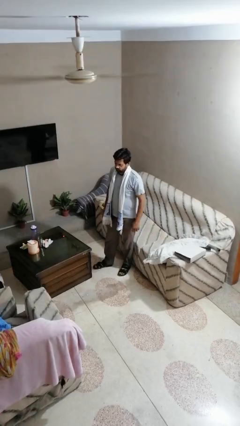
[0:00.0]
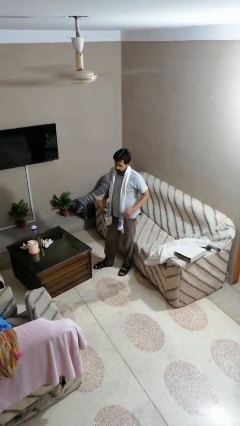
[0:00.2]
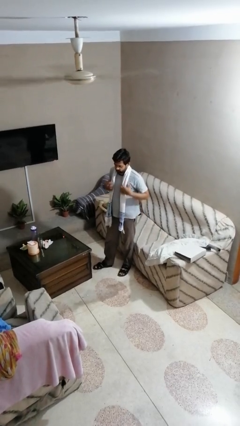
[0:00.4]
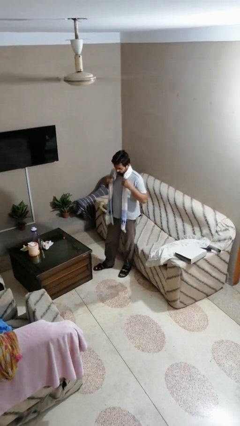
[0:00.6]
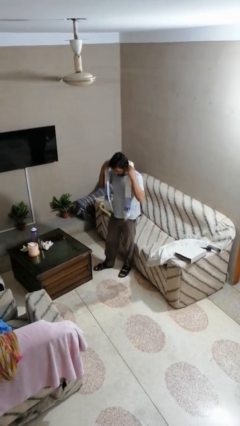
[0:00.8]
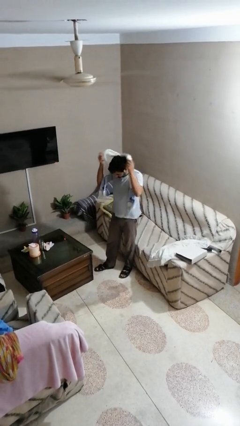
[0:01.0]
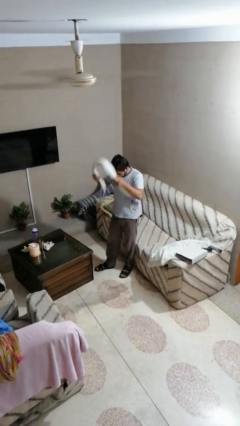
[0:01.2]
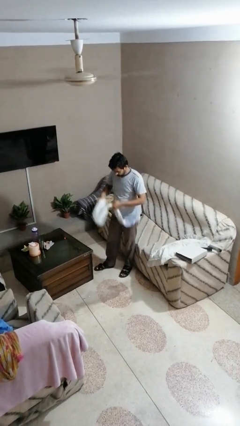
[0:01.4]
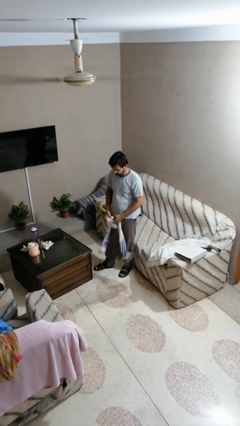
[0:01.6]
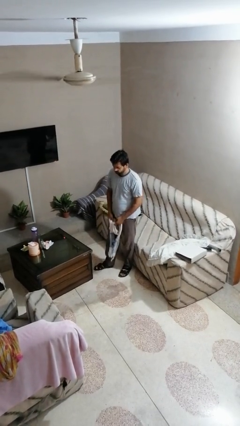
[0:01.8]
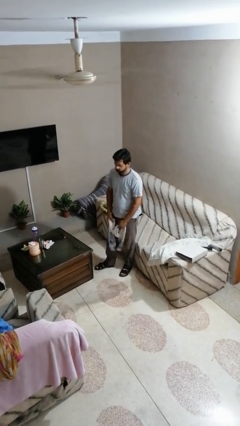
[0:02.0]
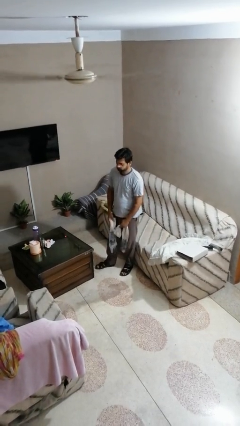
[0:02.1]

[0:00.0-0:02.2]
person takes off scarf

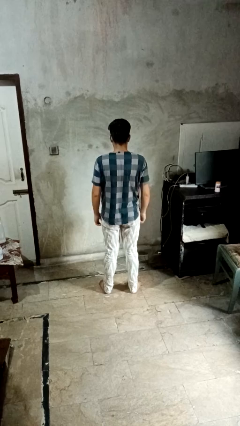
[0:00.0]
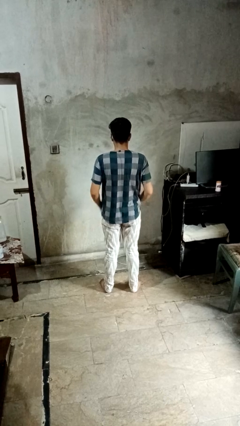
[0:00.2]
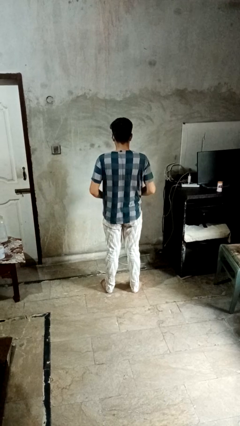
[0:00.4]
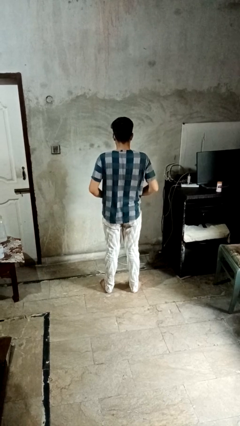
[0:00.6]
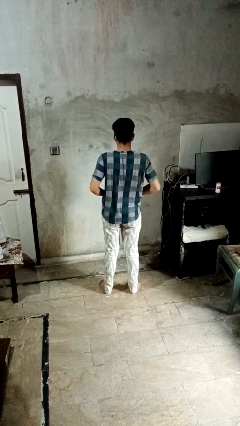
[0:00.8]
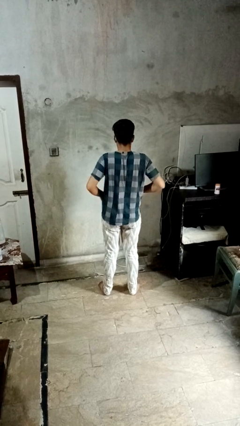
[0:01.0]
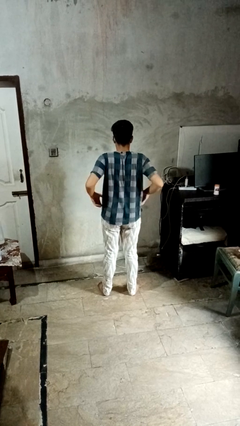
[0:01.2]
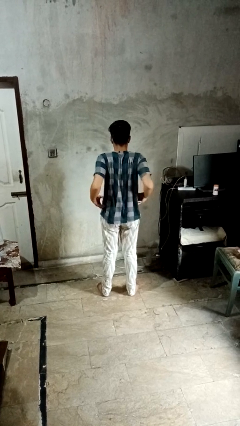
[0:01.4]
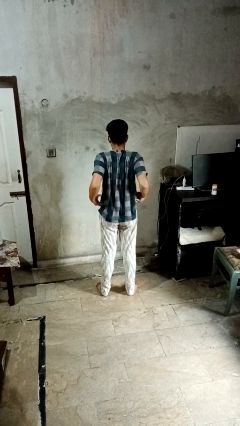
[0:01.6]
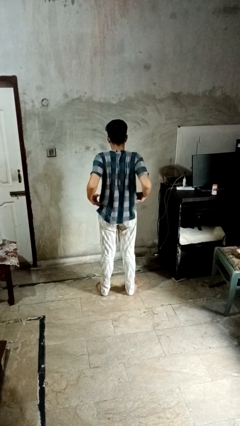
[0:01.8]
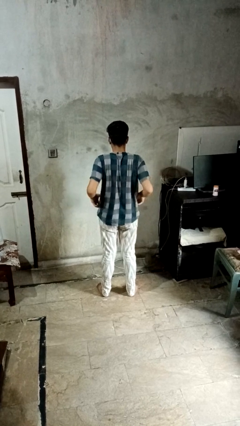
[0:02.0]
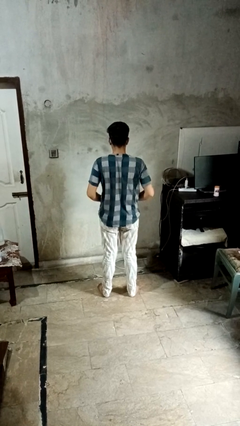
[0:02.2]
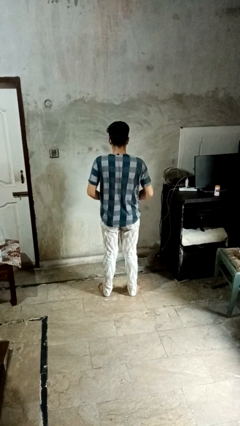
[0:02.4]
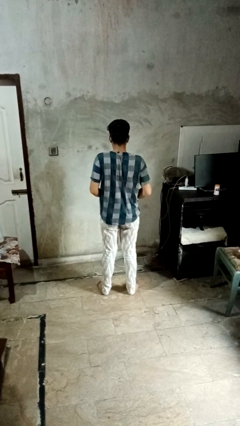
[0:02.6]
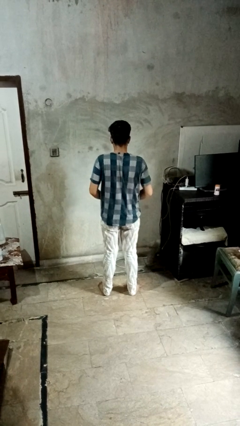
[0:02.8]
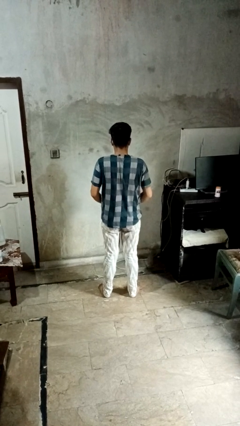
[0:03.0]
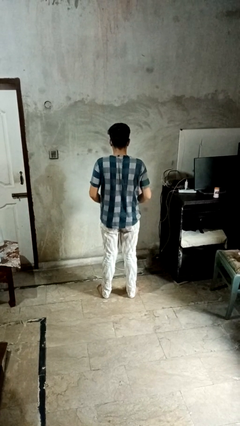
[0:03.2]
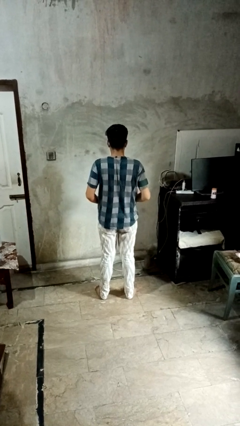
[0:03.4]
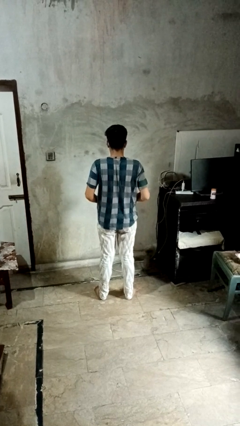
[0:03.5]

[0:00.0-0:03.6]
person hikes up pants

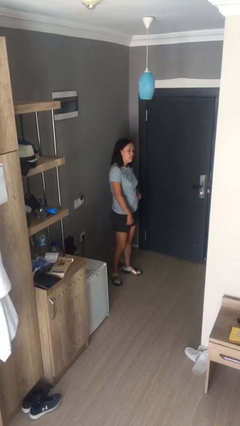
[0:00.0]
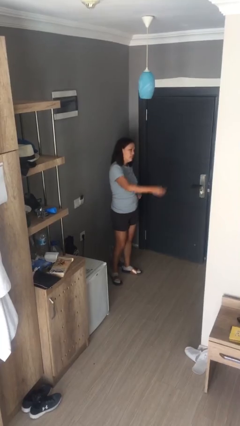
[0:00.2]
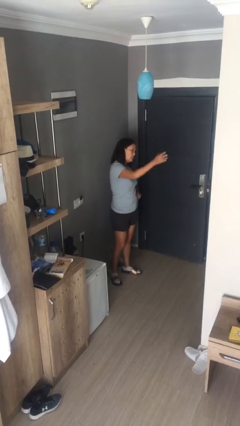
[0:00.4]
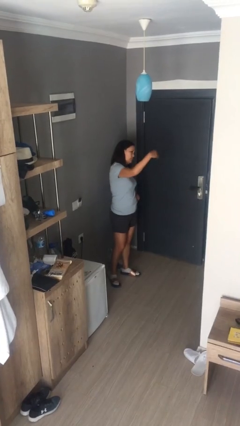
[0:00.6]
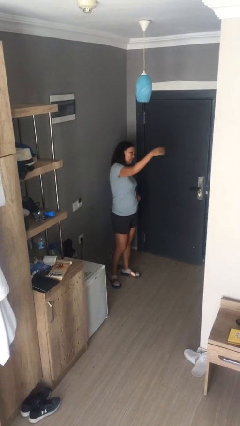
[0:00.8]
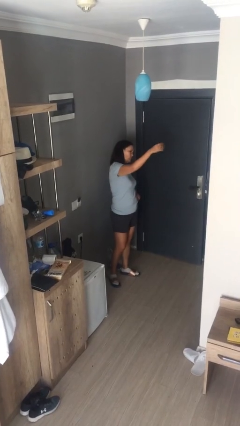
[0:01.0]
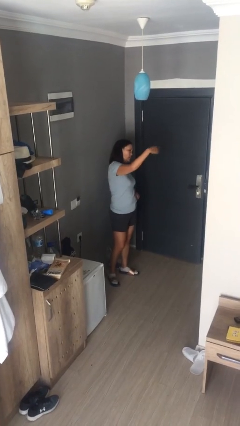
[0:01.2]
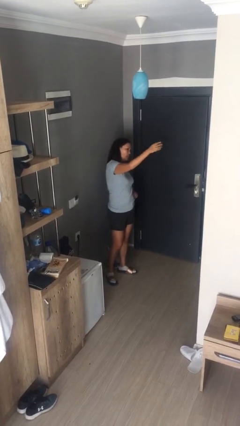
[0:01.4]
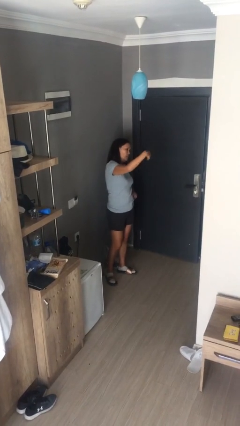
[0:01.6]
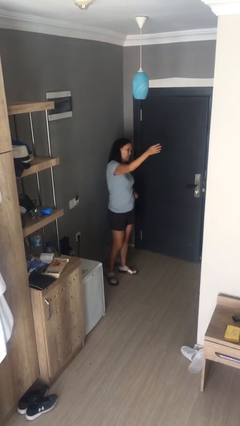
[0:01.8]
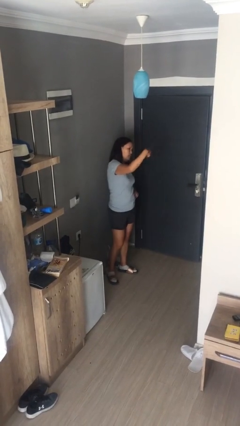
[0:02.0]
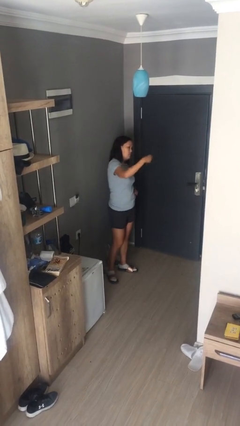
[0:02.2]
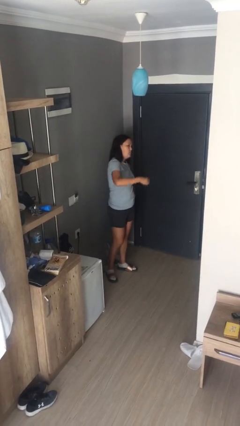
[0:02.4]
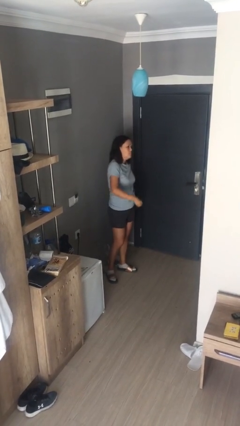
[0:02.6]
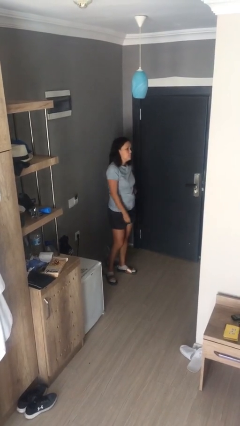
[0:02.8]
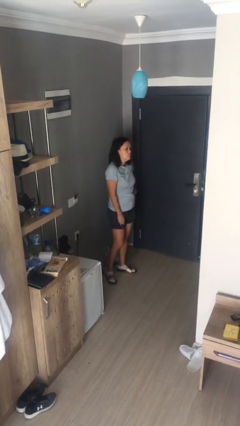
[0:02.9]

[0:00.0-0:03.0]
person gestures come here

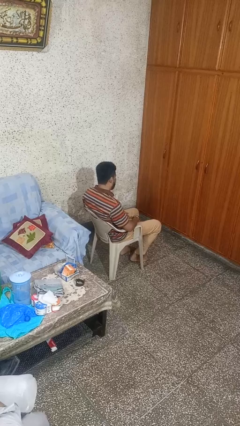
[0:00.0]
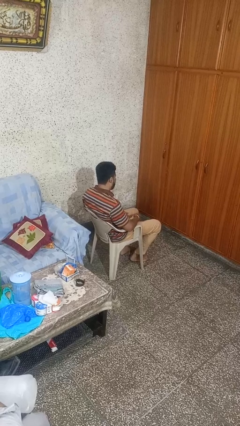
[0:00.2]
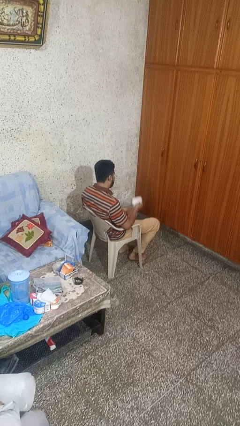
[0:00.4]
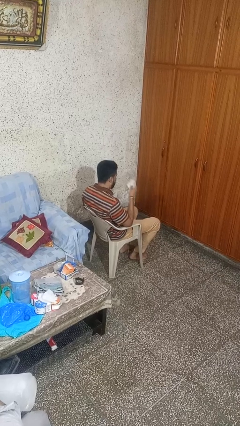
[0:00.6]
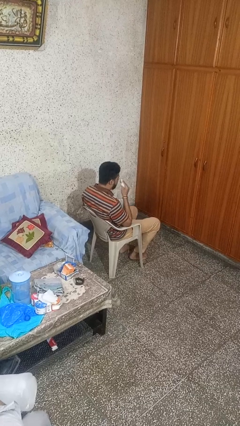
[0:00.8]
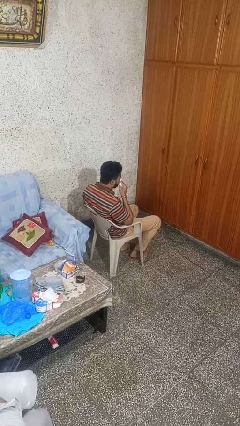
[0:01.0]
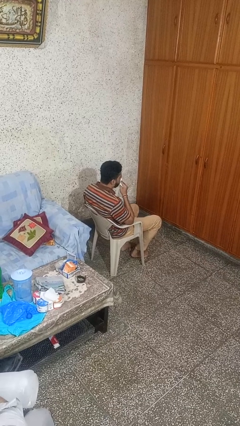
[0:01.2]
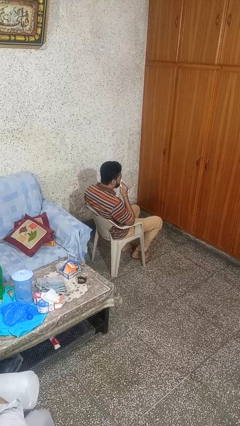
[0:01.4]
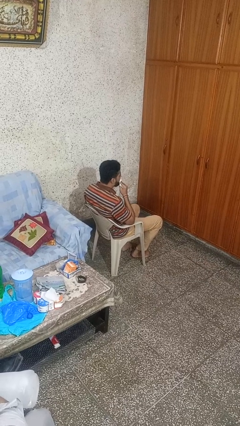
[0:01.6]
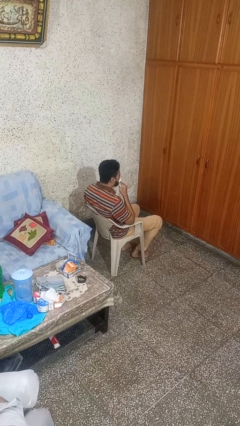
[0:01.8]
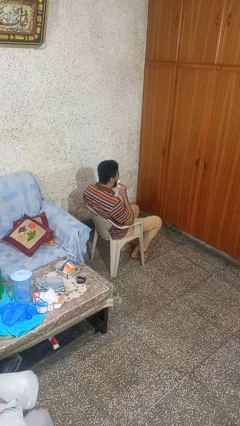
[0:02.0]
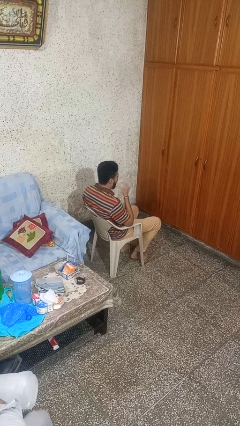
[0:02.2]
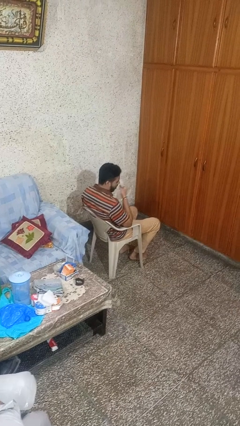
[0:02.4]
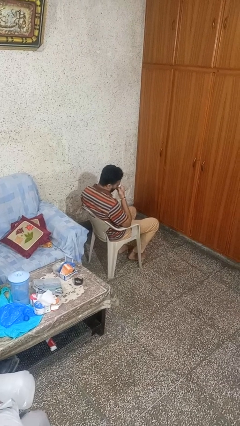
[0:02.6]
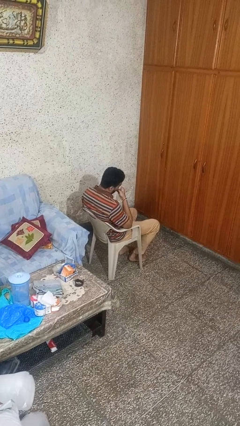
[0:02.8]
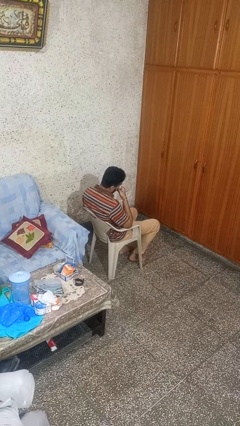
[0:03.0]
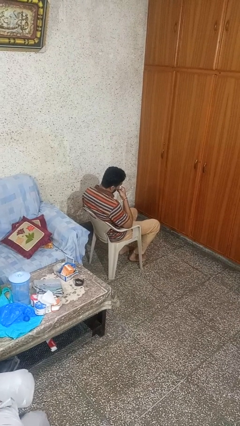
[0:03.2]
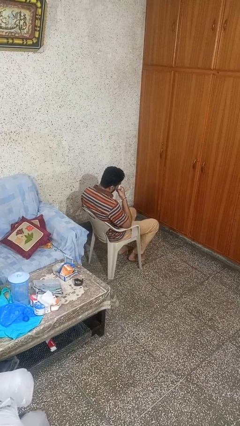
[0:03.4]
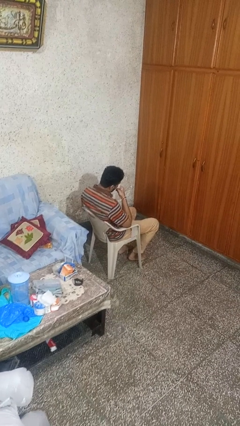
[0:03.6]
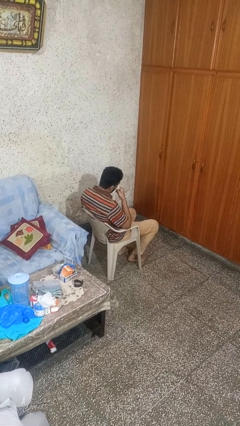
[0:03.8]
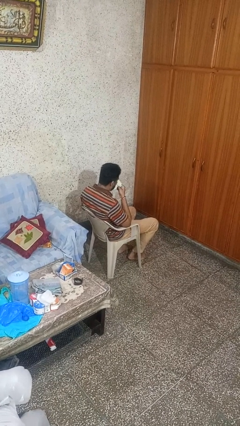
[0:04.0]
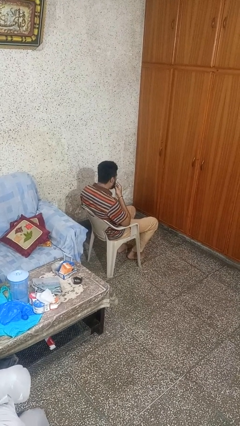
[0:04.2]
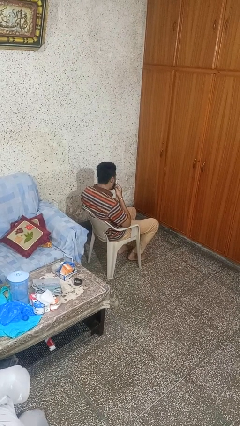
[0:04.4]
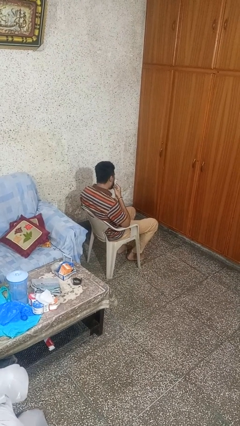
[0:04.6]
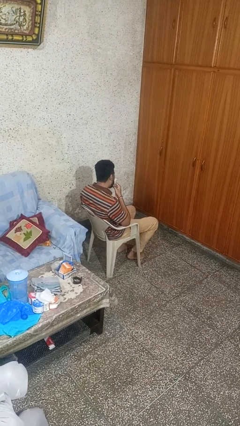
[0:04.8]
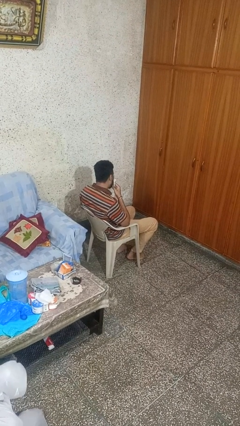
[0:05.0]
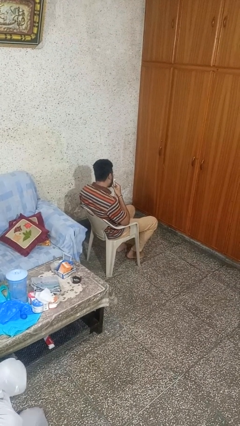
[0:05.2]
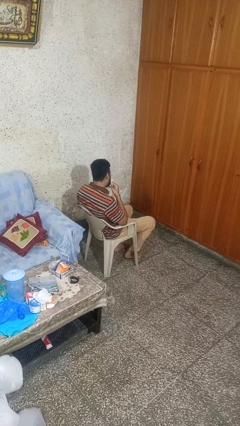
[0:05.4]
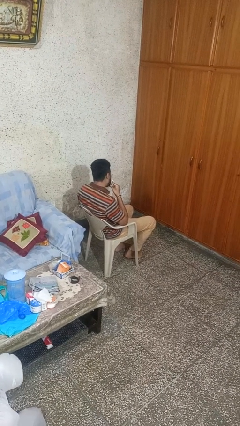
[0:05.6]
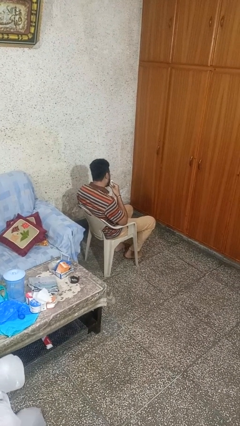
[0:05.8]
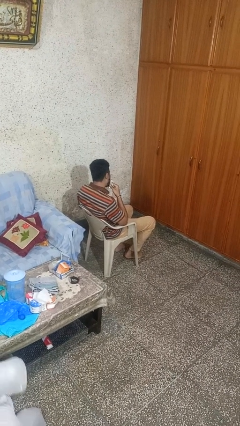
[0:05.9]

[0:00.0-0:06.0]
person wipes mouth with napkin

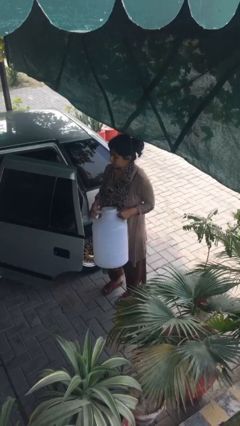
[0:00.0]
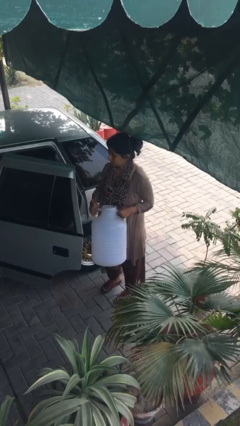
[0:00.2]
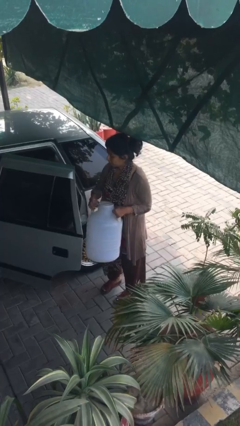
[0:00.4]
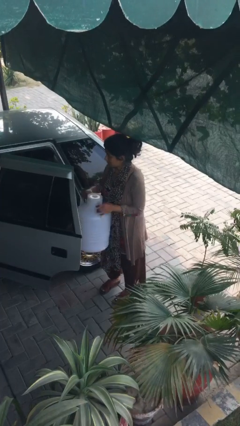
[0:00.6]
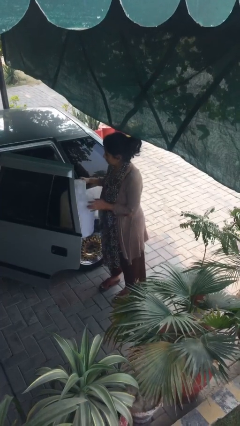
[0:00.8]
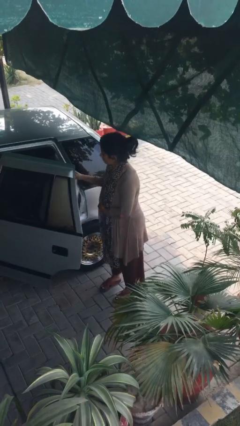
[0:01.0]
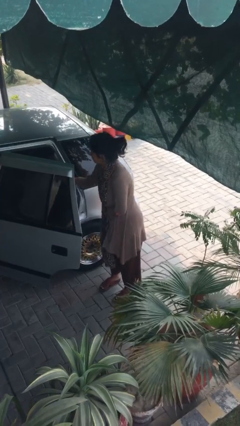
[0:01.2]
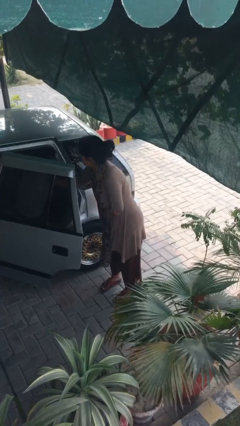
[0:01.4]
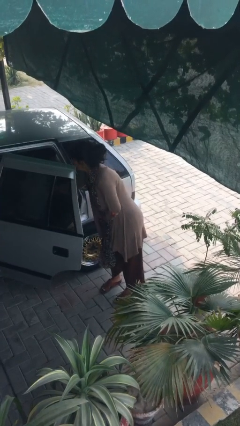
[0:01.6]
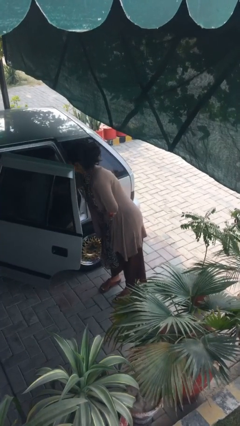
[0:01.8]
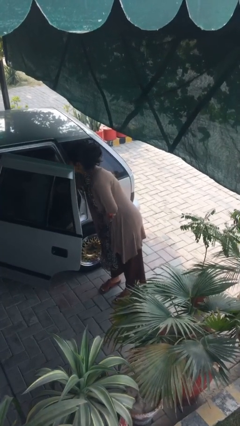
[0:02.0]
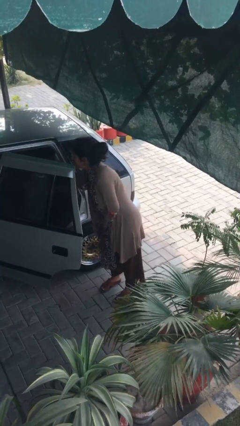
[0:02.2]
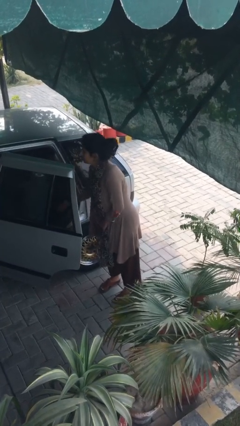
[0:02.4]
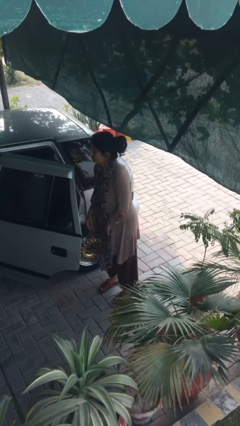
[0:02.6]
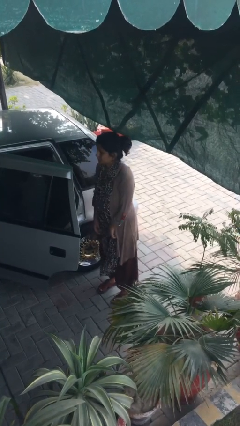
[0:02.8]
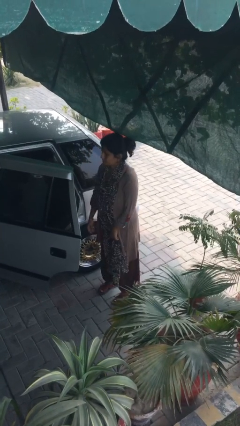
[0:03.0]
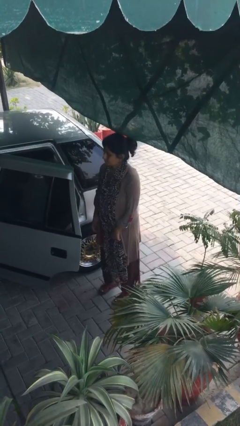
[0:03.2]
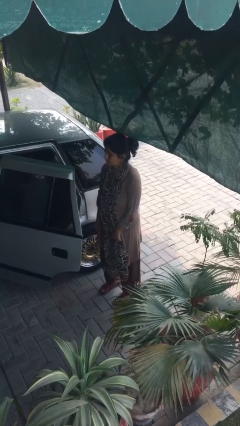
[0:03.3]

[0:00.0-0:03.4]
person loads car
